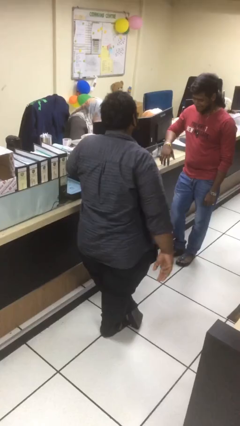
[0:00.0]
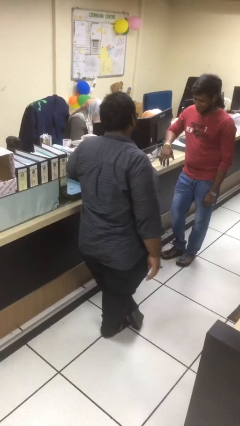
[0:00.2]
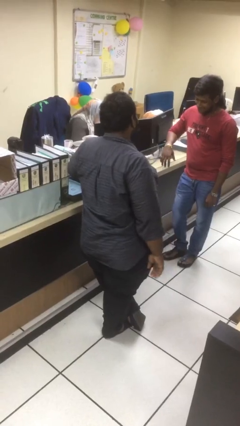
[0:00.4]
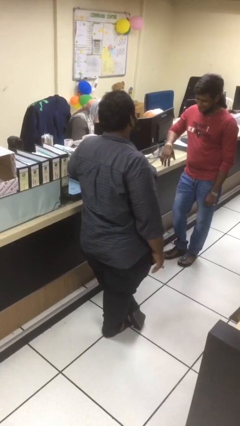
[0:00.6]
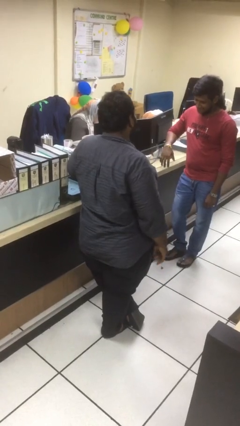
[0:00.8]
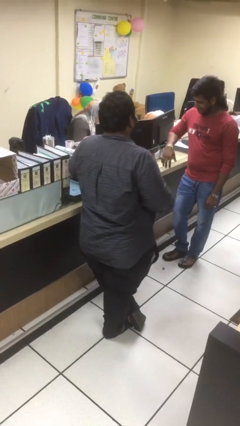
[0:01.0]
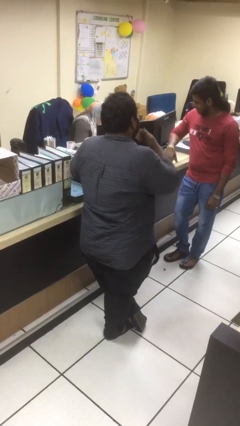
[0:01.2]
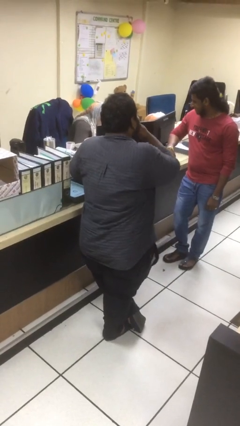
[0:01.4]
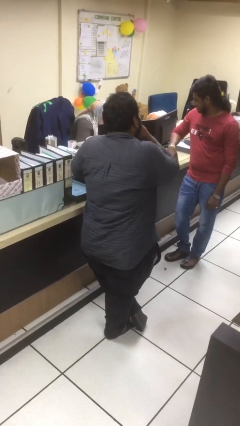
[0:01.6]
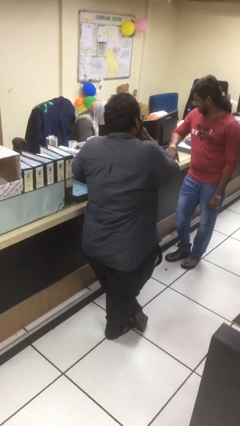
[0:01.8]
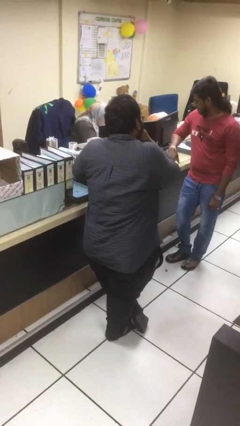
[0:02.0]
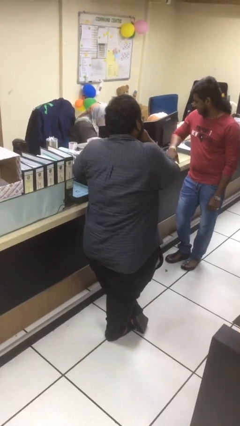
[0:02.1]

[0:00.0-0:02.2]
person laughs with person

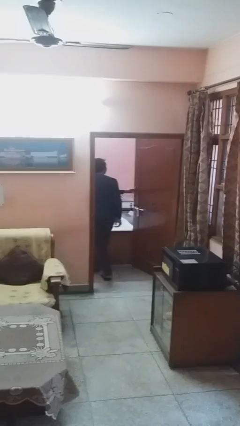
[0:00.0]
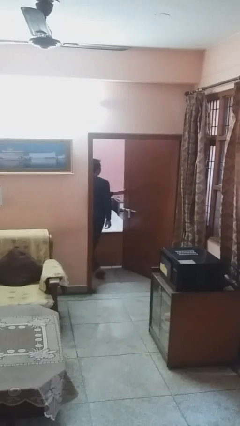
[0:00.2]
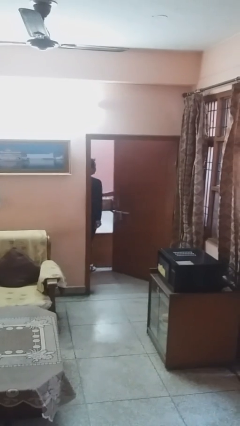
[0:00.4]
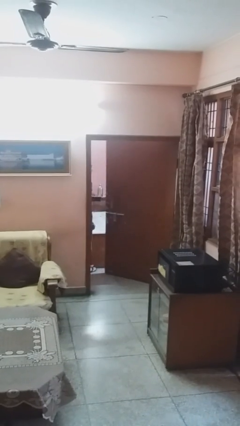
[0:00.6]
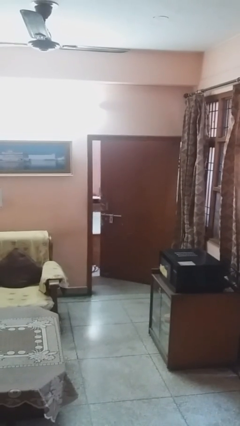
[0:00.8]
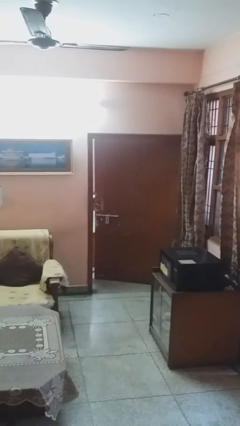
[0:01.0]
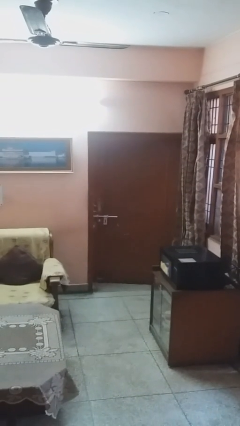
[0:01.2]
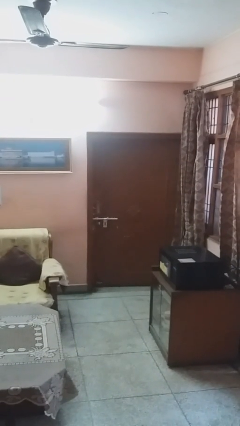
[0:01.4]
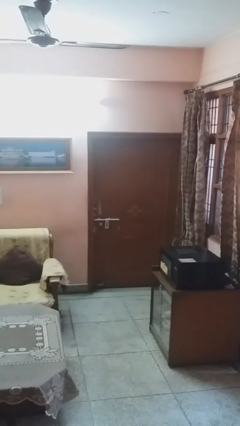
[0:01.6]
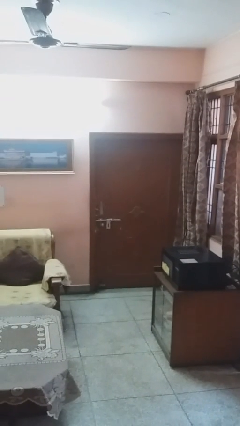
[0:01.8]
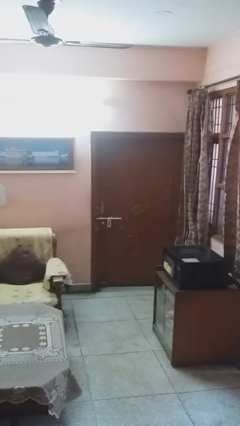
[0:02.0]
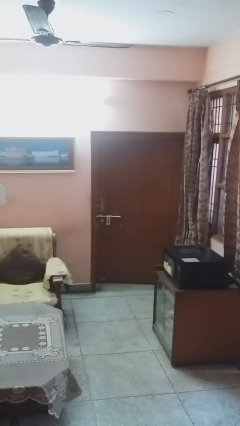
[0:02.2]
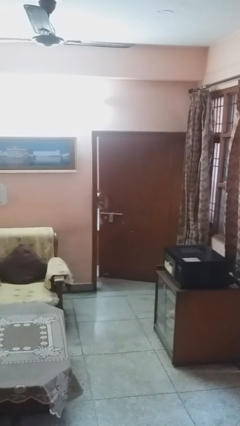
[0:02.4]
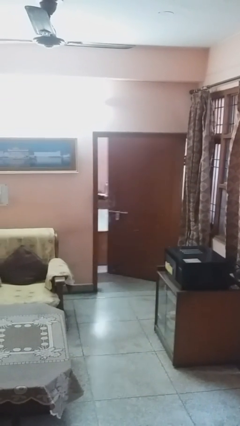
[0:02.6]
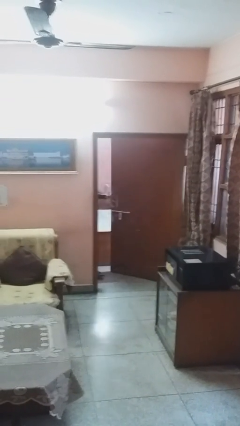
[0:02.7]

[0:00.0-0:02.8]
person closes facility door

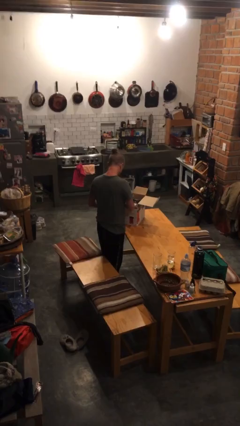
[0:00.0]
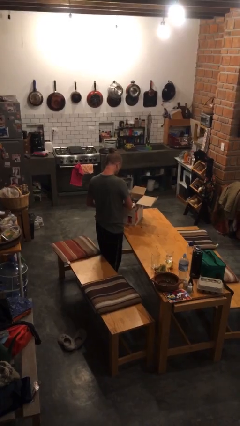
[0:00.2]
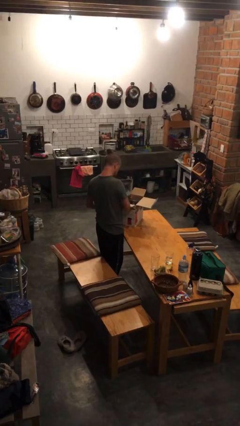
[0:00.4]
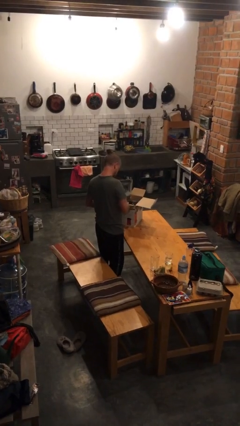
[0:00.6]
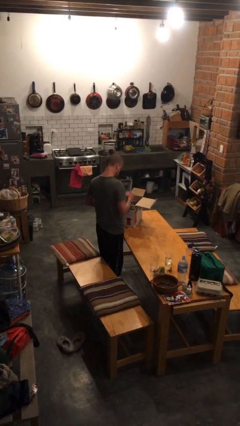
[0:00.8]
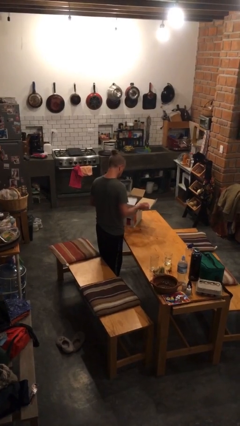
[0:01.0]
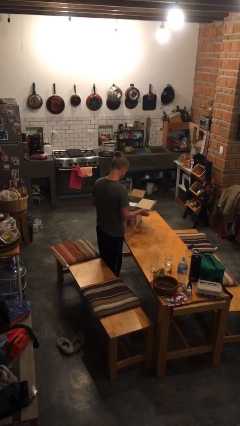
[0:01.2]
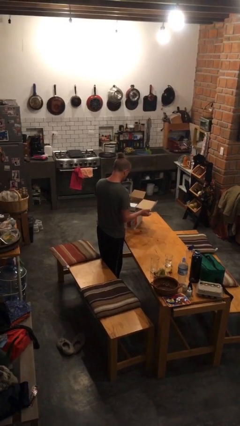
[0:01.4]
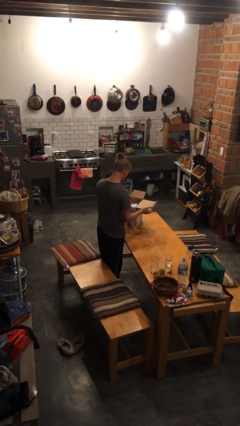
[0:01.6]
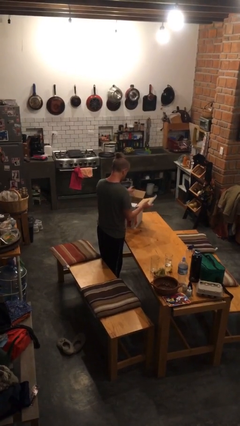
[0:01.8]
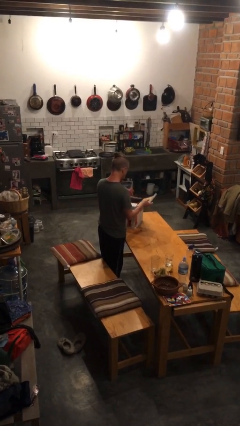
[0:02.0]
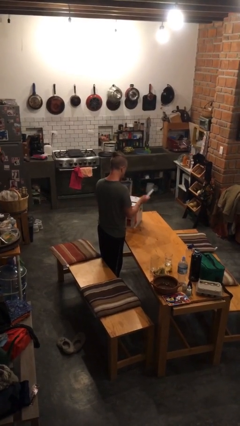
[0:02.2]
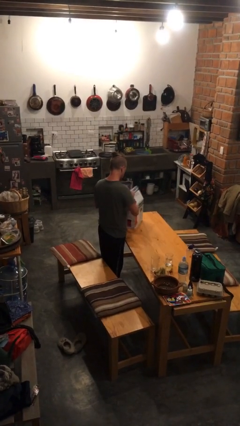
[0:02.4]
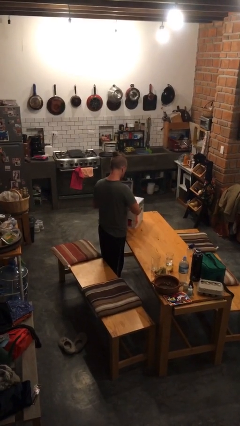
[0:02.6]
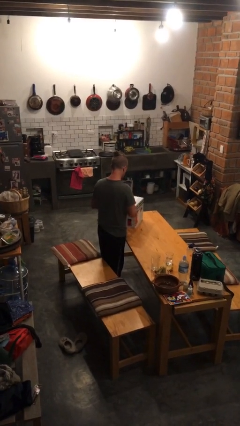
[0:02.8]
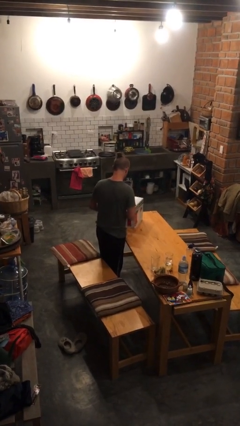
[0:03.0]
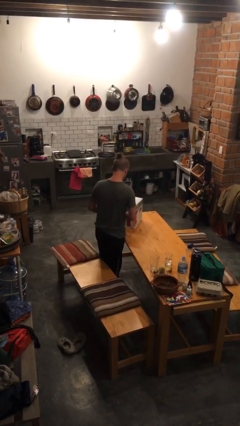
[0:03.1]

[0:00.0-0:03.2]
person closes box

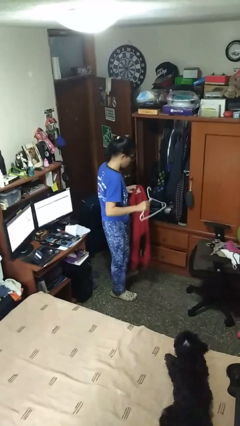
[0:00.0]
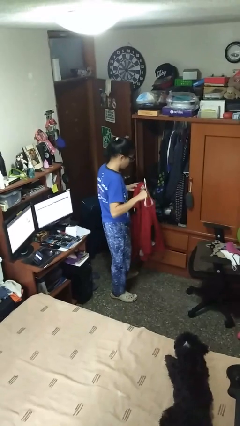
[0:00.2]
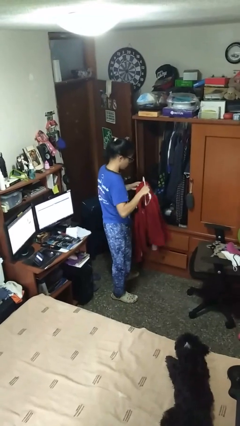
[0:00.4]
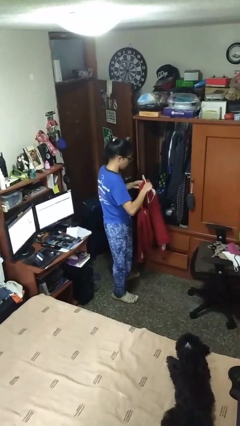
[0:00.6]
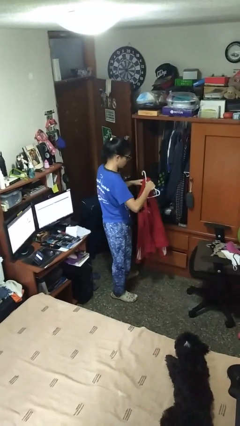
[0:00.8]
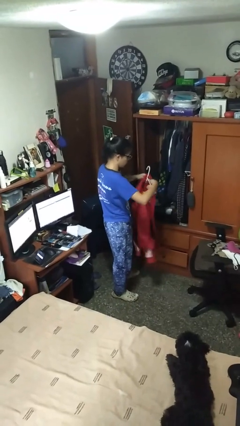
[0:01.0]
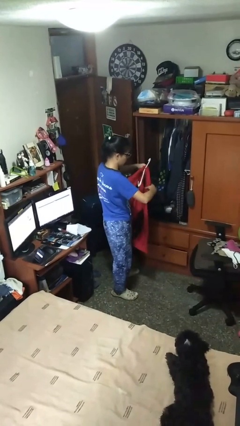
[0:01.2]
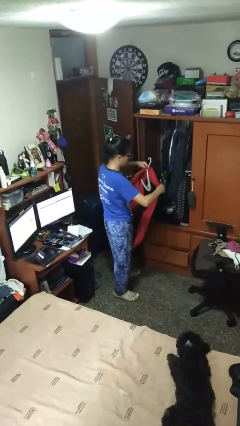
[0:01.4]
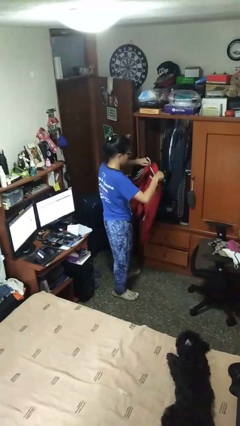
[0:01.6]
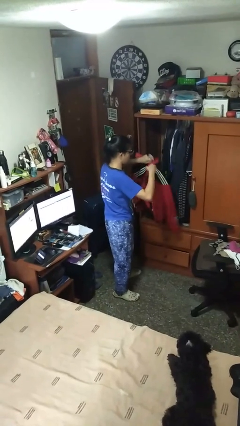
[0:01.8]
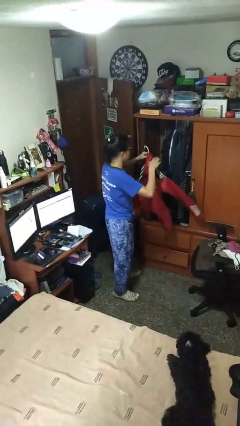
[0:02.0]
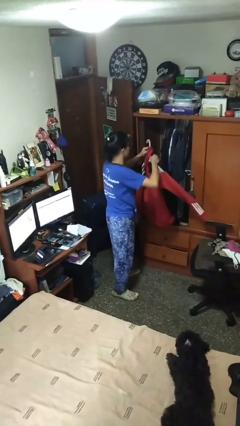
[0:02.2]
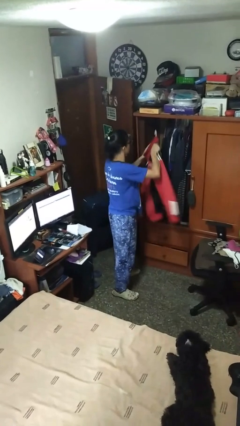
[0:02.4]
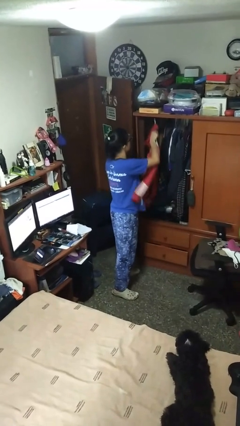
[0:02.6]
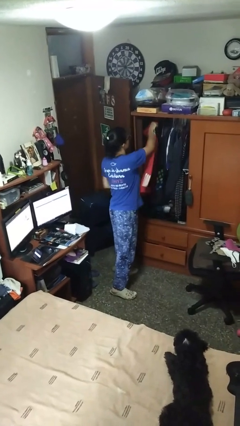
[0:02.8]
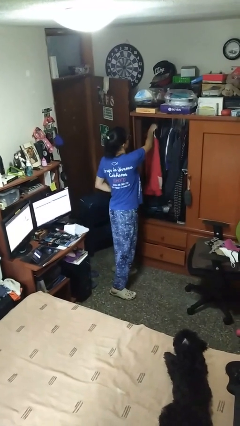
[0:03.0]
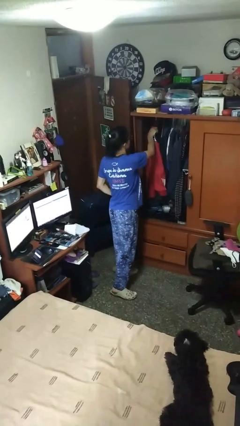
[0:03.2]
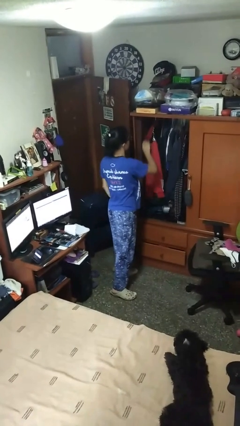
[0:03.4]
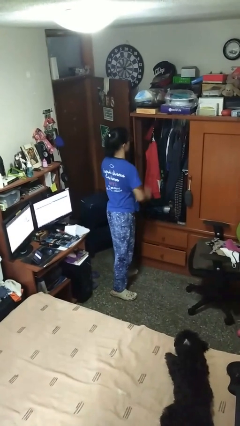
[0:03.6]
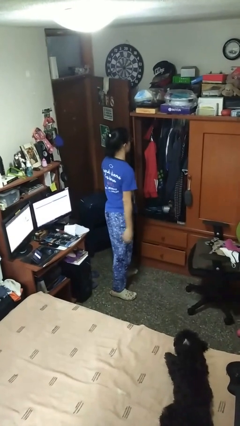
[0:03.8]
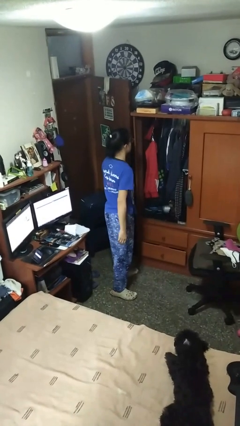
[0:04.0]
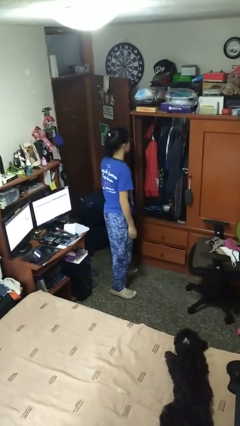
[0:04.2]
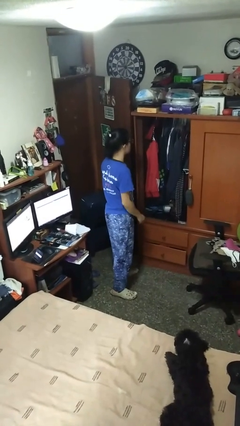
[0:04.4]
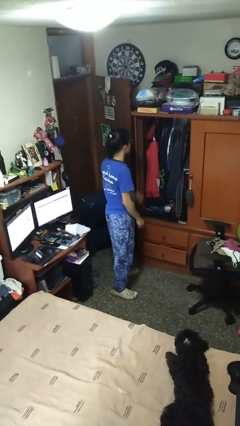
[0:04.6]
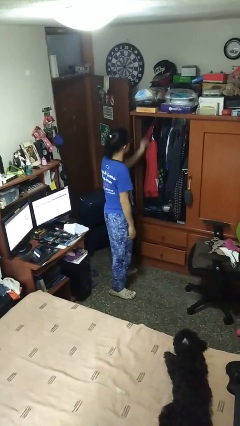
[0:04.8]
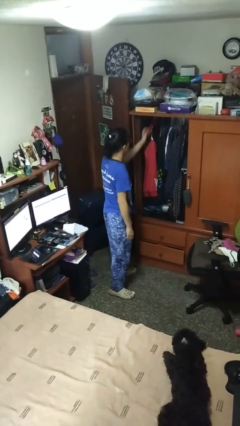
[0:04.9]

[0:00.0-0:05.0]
person puts clothes into closet

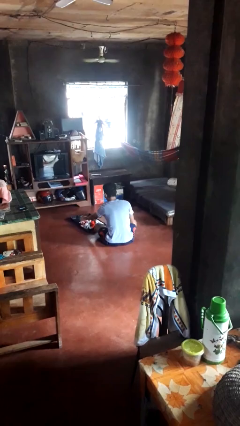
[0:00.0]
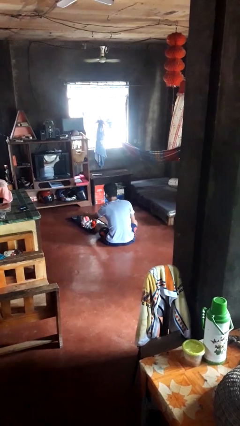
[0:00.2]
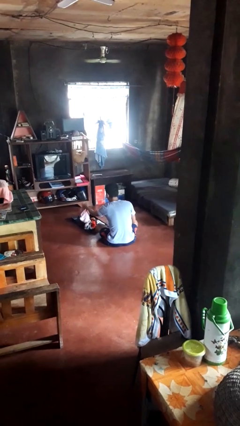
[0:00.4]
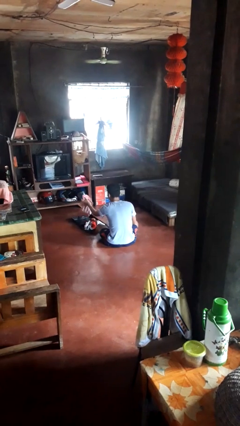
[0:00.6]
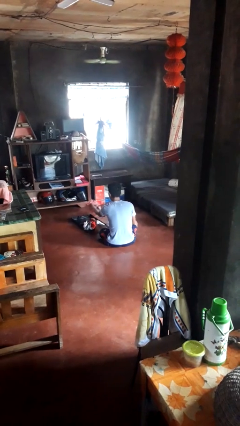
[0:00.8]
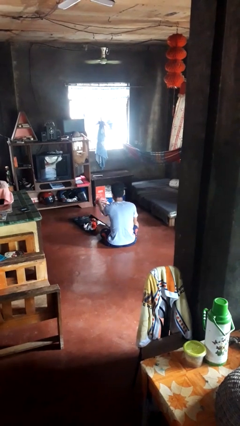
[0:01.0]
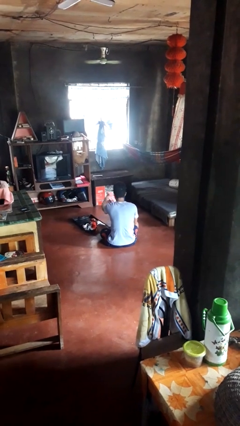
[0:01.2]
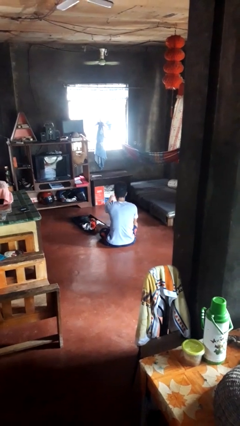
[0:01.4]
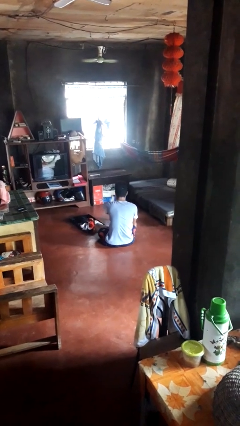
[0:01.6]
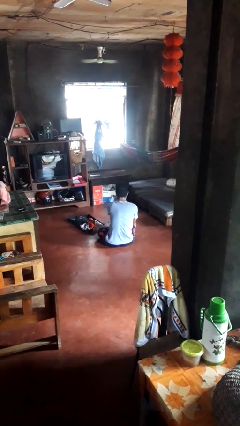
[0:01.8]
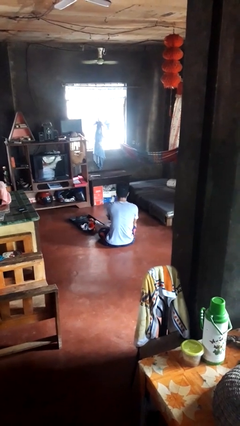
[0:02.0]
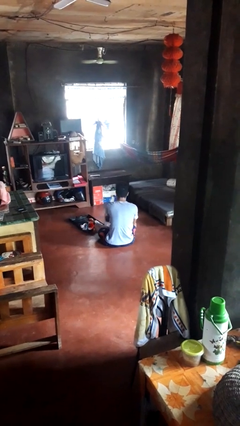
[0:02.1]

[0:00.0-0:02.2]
person unloads clothes from suitcase

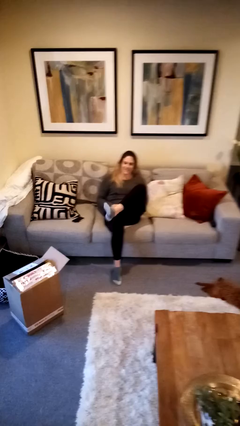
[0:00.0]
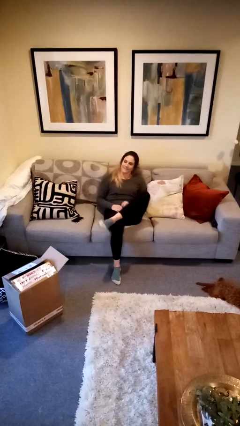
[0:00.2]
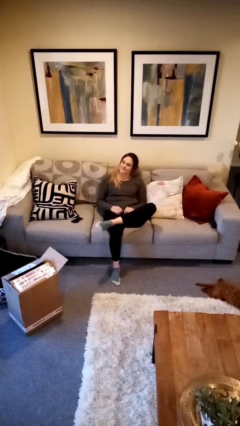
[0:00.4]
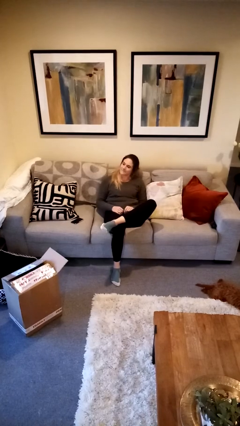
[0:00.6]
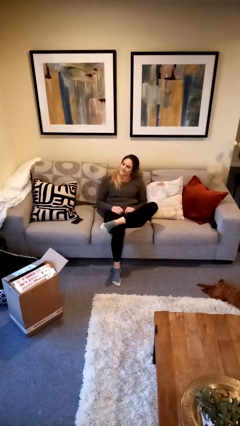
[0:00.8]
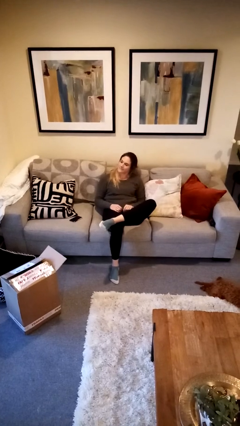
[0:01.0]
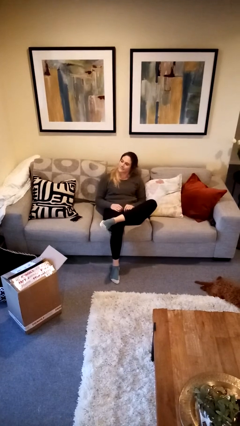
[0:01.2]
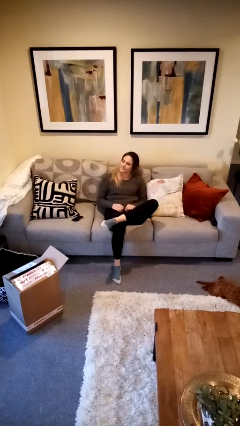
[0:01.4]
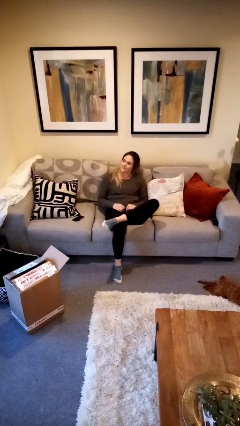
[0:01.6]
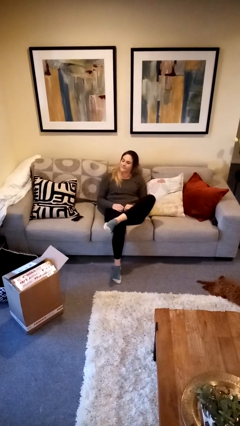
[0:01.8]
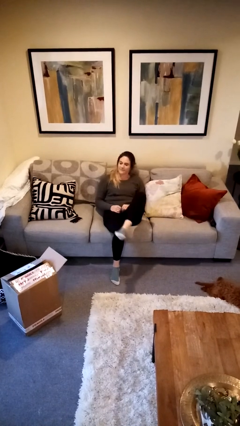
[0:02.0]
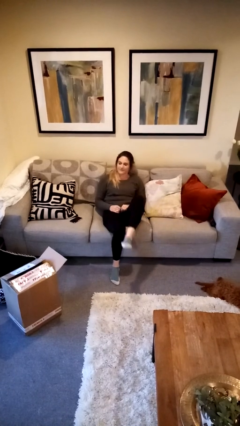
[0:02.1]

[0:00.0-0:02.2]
person crosses legs
